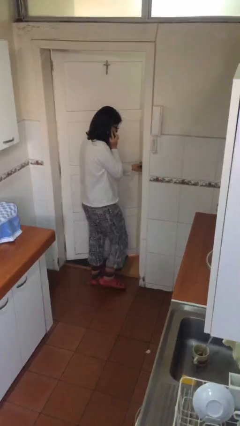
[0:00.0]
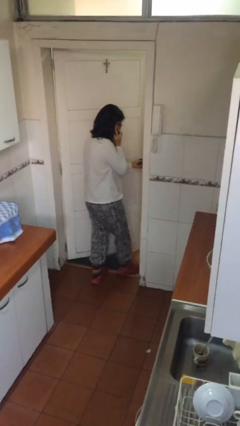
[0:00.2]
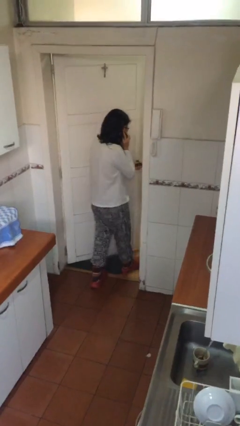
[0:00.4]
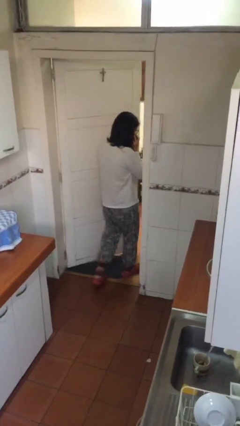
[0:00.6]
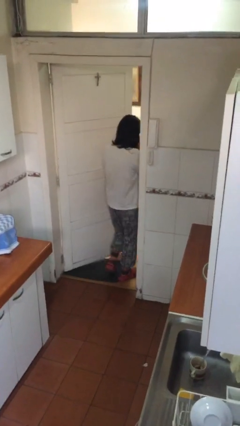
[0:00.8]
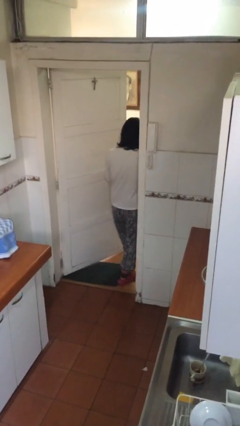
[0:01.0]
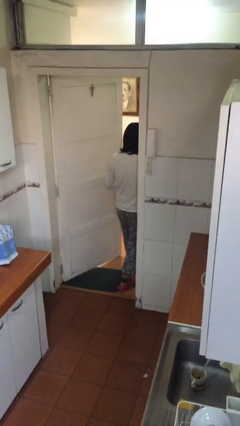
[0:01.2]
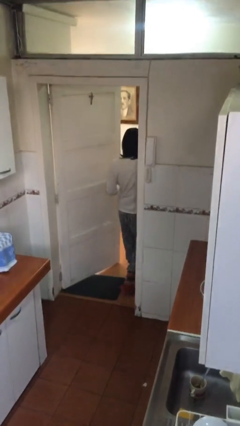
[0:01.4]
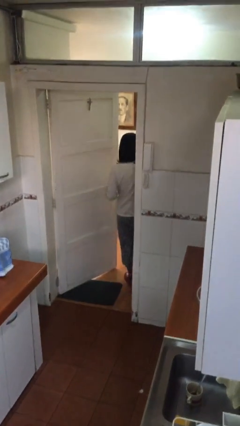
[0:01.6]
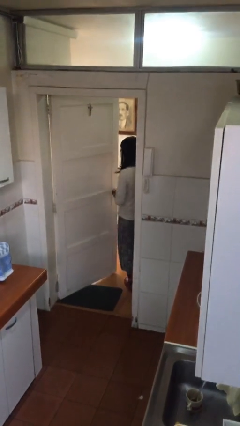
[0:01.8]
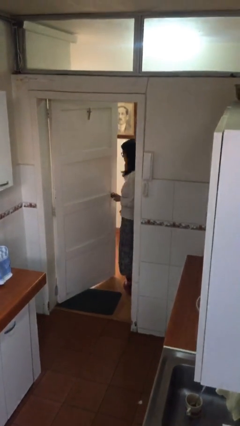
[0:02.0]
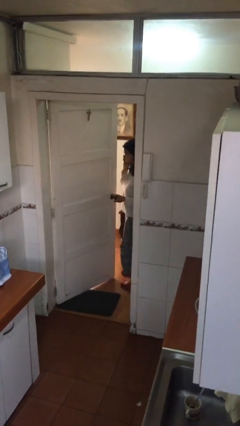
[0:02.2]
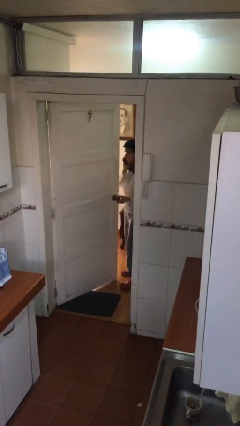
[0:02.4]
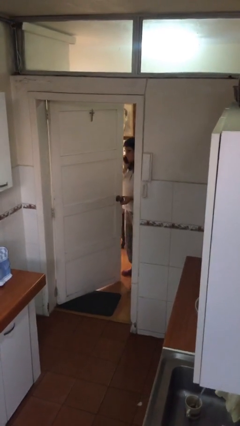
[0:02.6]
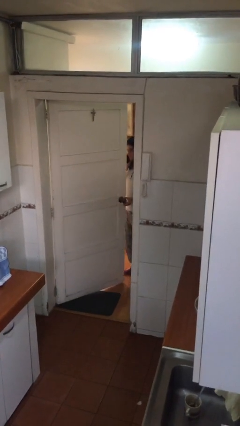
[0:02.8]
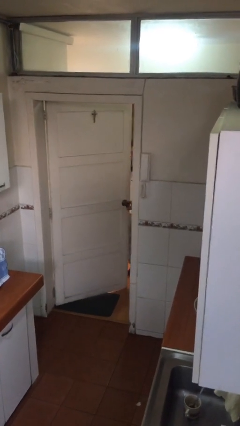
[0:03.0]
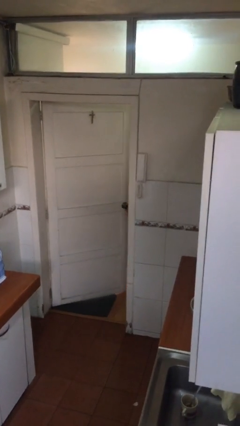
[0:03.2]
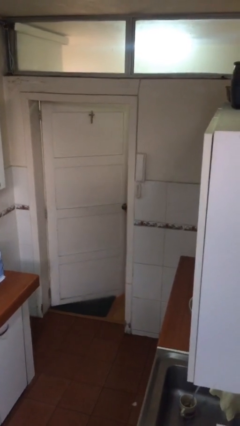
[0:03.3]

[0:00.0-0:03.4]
person exits scene through structure

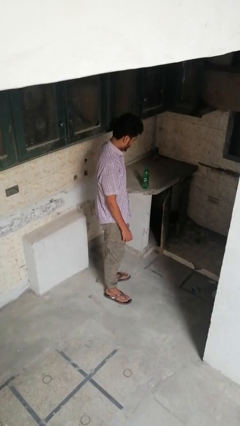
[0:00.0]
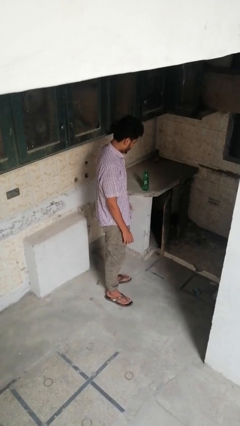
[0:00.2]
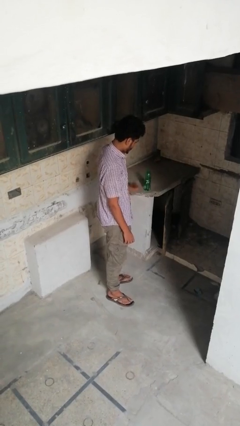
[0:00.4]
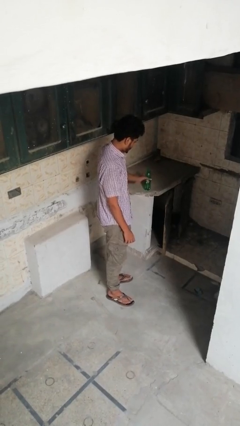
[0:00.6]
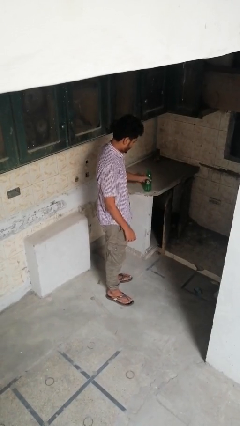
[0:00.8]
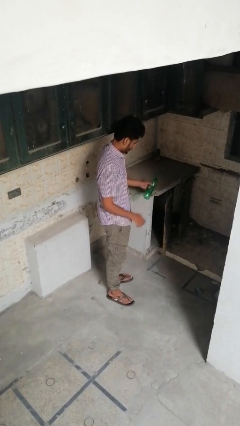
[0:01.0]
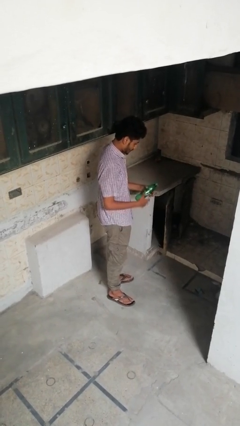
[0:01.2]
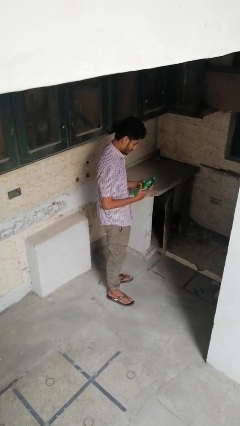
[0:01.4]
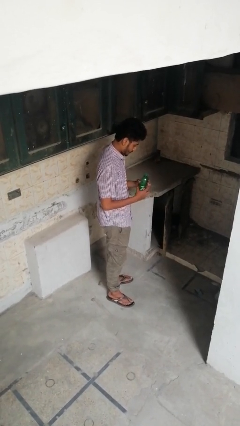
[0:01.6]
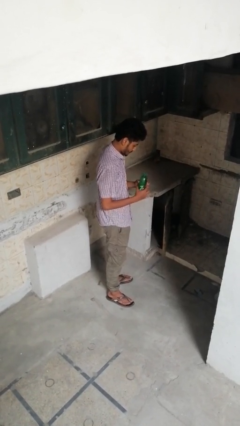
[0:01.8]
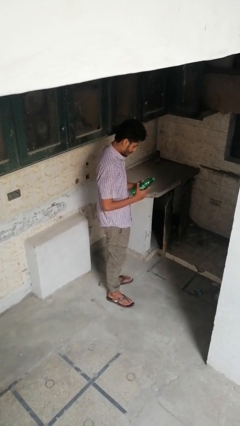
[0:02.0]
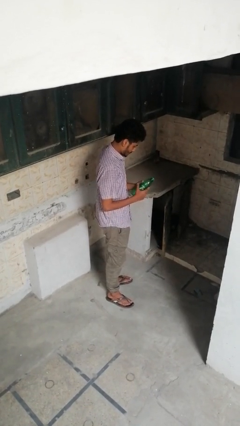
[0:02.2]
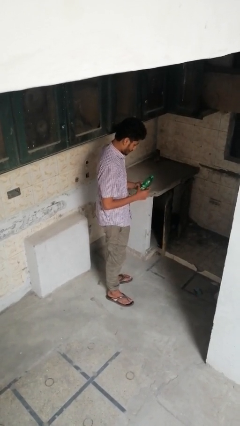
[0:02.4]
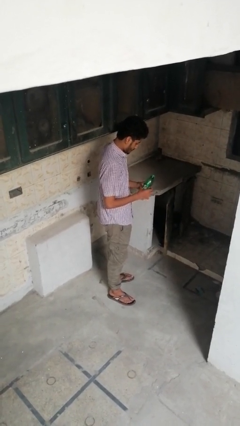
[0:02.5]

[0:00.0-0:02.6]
person picks up object from countertop

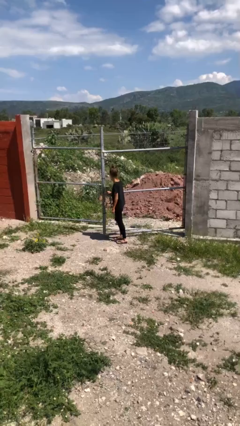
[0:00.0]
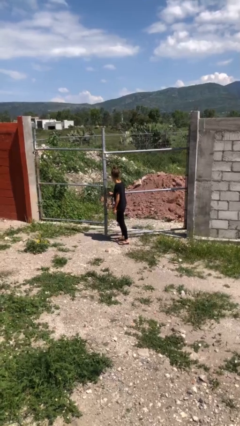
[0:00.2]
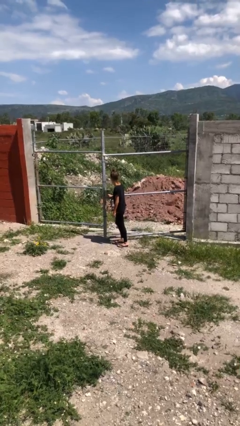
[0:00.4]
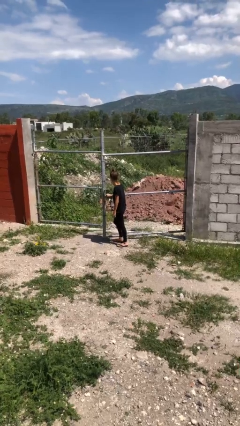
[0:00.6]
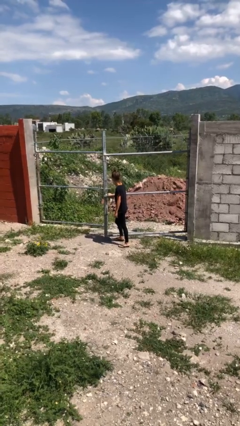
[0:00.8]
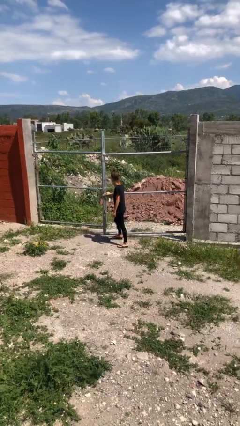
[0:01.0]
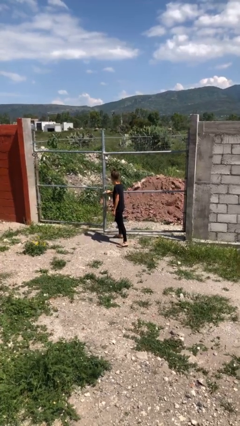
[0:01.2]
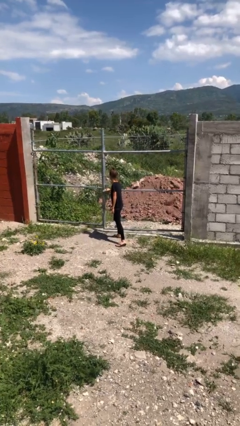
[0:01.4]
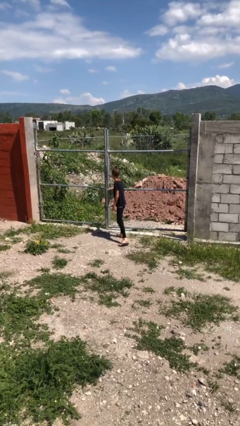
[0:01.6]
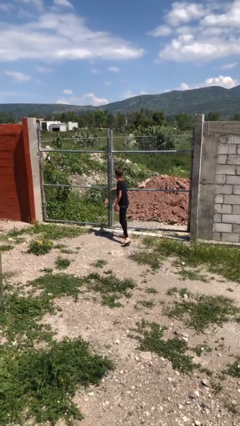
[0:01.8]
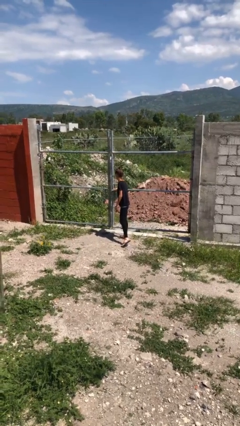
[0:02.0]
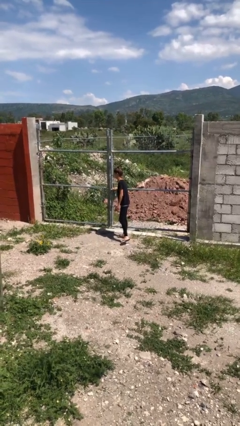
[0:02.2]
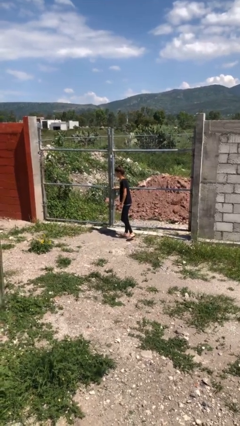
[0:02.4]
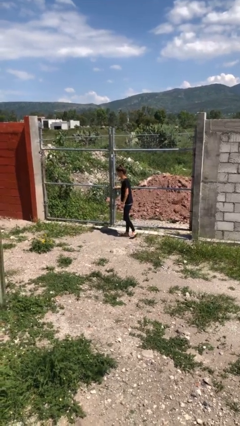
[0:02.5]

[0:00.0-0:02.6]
person closes gate

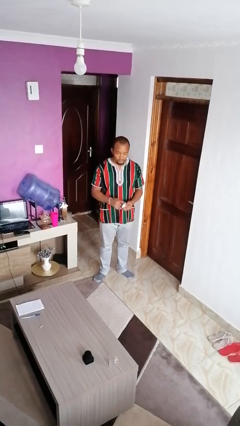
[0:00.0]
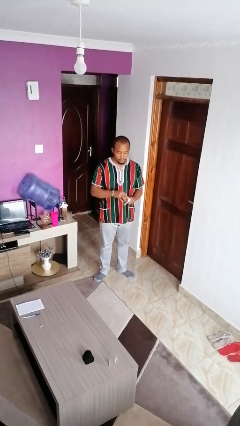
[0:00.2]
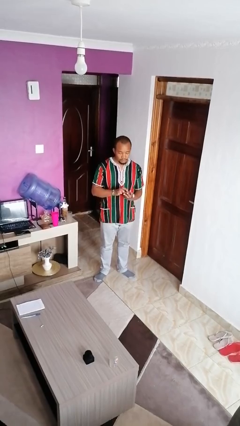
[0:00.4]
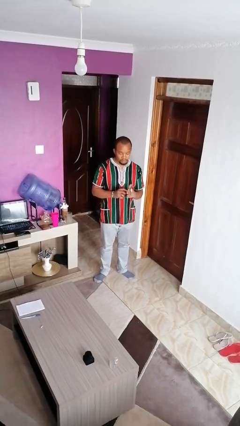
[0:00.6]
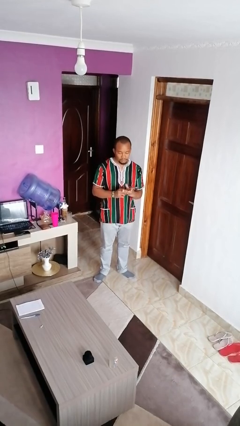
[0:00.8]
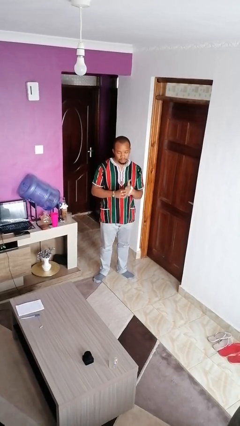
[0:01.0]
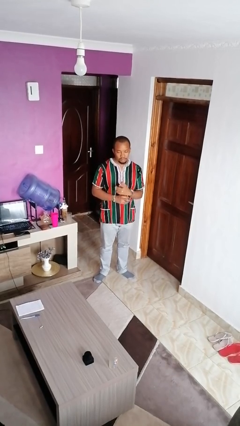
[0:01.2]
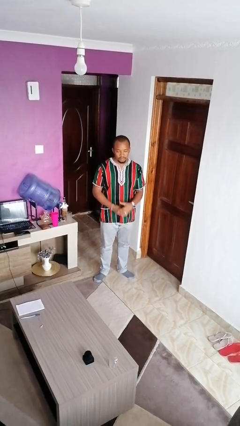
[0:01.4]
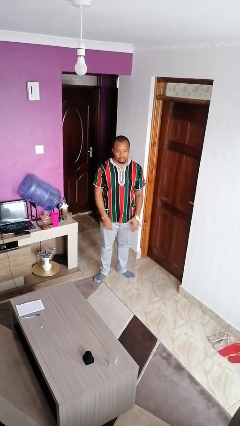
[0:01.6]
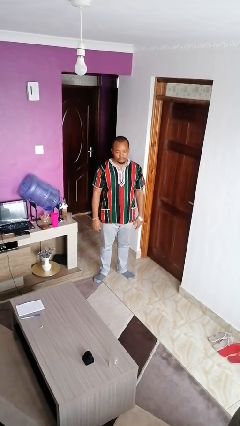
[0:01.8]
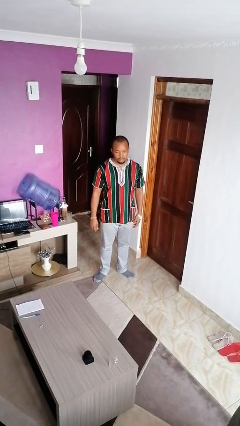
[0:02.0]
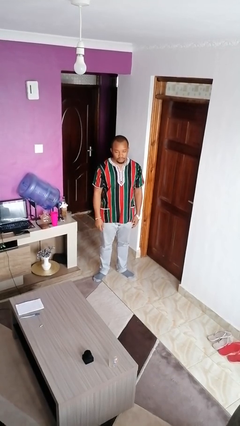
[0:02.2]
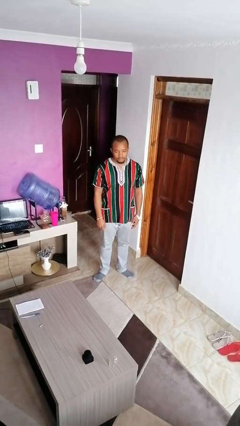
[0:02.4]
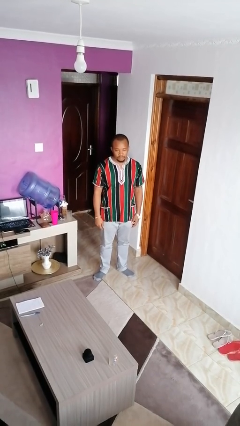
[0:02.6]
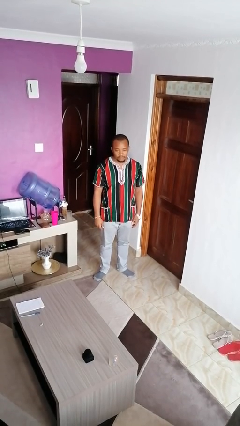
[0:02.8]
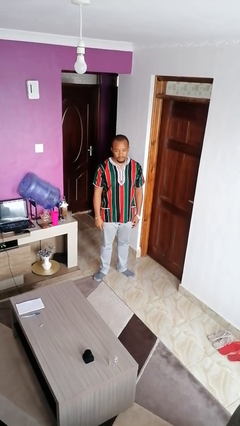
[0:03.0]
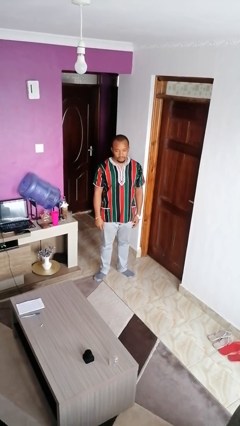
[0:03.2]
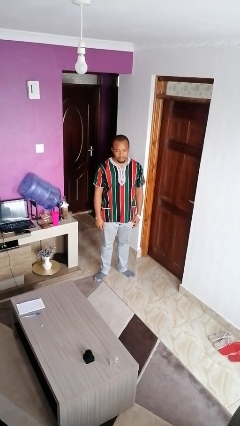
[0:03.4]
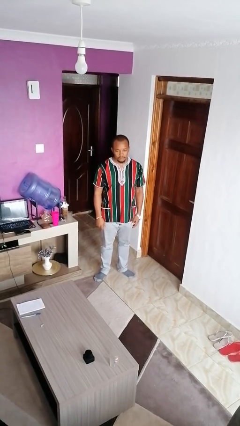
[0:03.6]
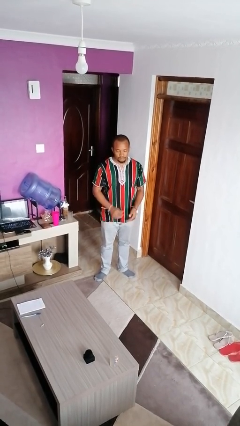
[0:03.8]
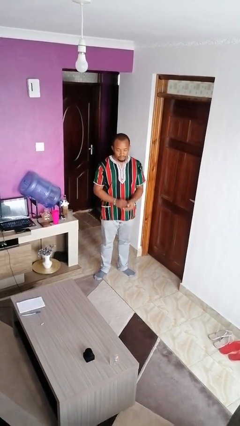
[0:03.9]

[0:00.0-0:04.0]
person puts on wristwatch

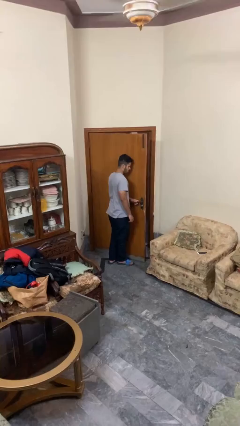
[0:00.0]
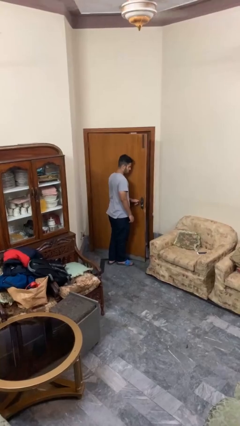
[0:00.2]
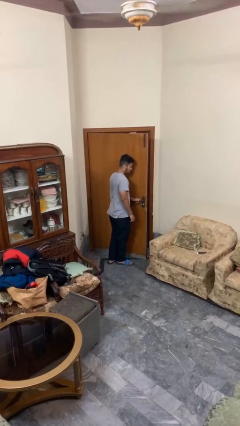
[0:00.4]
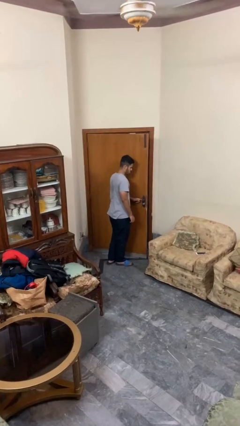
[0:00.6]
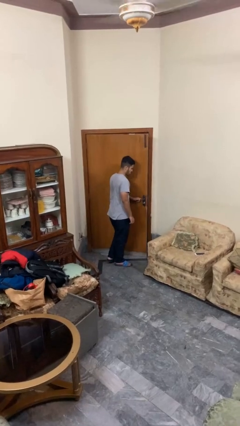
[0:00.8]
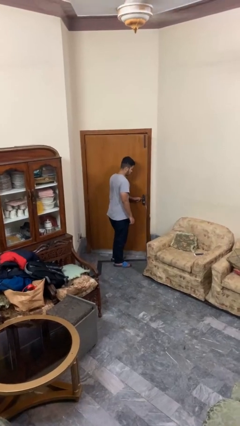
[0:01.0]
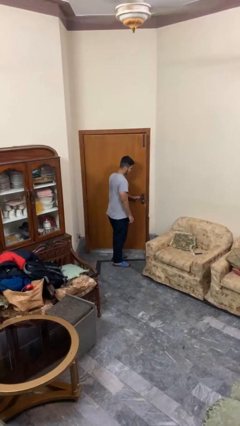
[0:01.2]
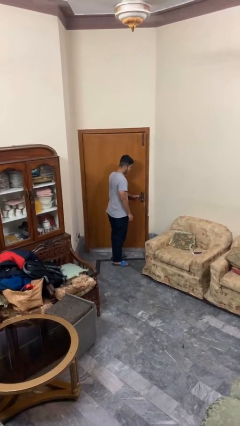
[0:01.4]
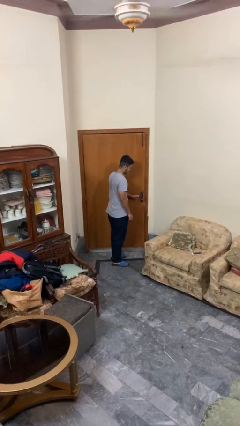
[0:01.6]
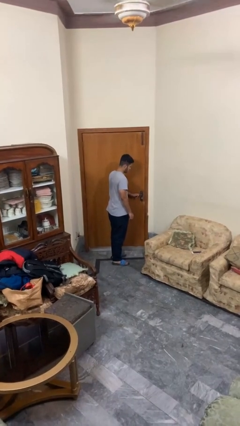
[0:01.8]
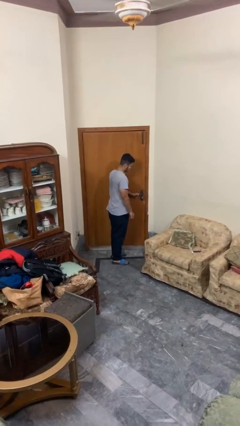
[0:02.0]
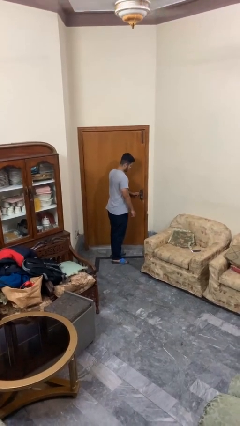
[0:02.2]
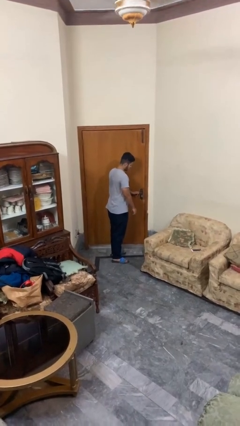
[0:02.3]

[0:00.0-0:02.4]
person closes facility door

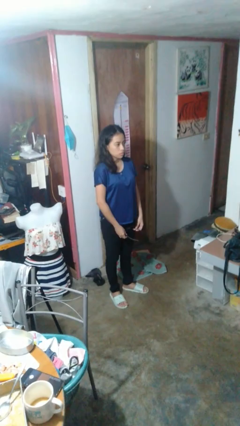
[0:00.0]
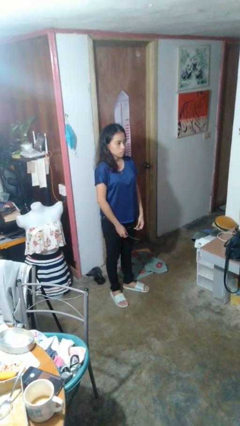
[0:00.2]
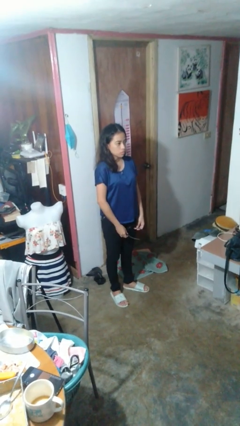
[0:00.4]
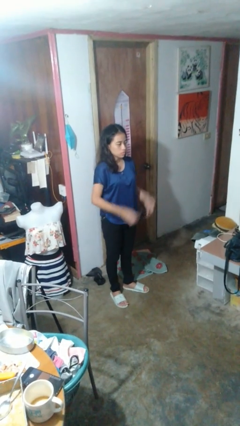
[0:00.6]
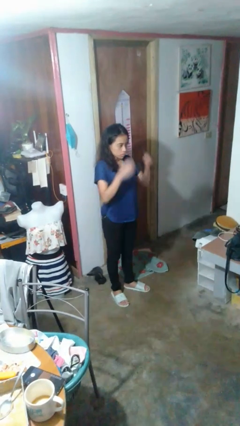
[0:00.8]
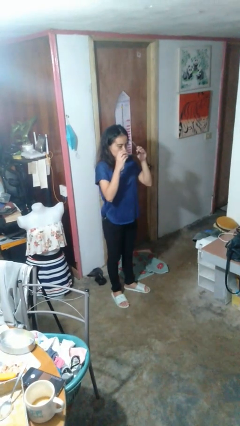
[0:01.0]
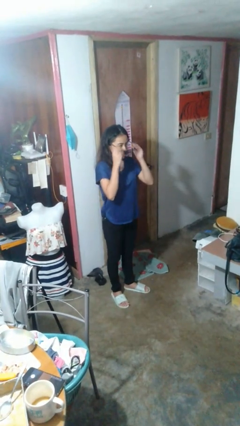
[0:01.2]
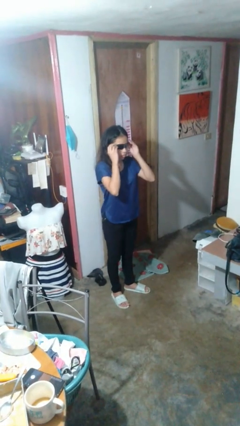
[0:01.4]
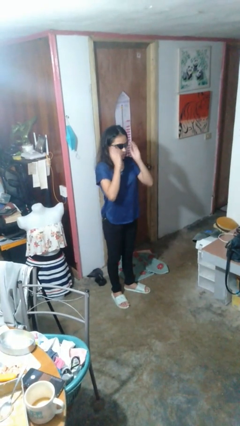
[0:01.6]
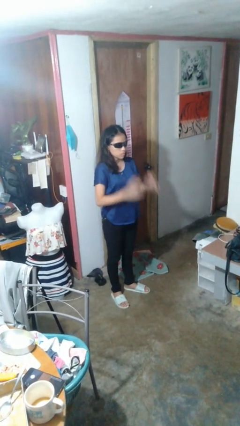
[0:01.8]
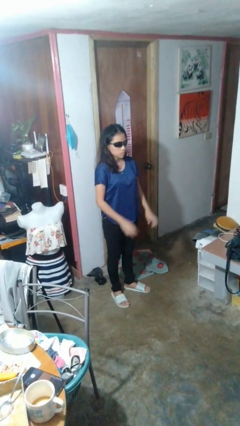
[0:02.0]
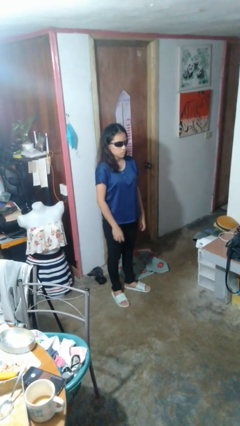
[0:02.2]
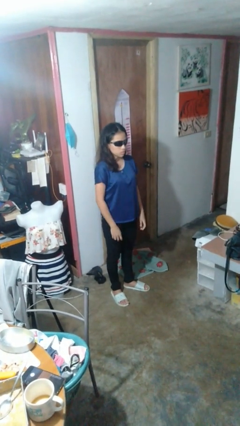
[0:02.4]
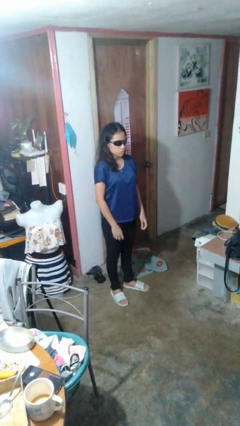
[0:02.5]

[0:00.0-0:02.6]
person puts on sunglasses
